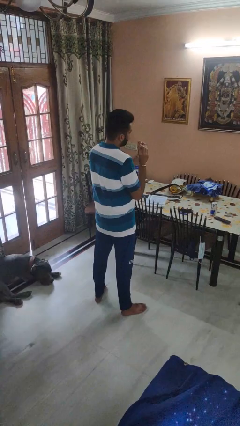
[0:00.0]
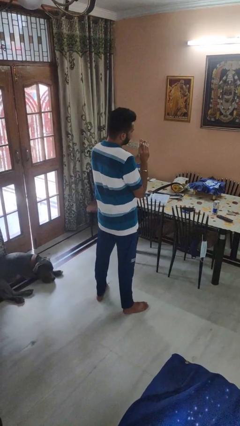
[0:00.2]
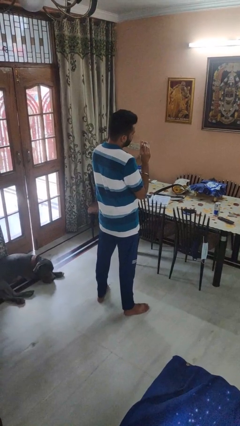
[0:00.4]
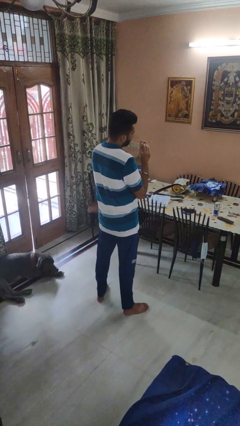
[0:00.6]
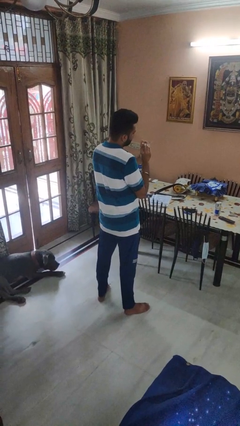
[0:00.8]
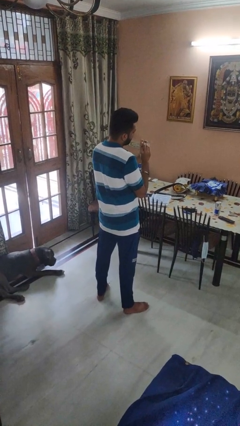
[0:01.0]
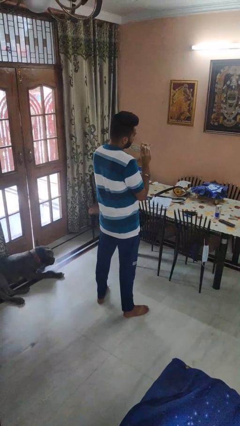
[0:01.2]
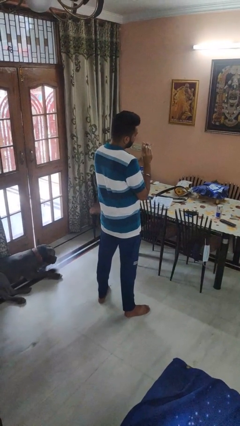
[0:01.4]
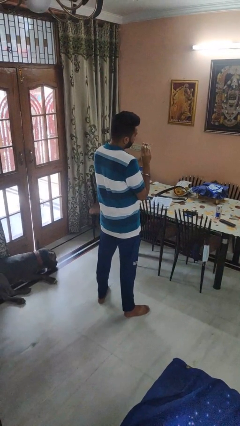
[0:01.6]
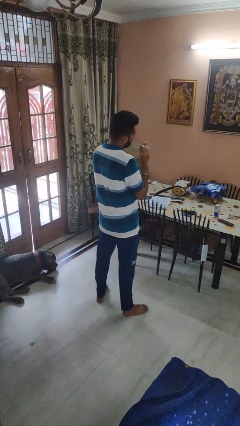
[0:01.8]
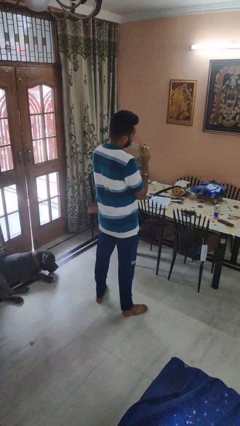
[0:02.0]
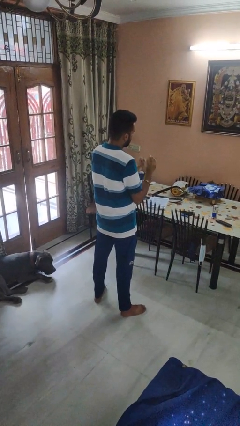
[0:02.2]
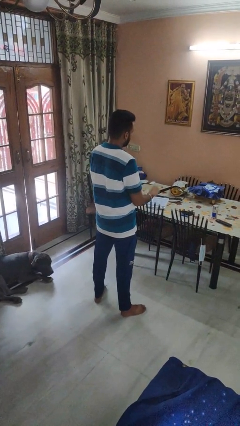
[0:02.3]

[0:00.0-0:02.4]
person files fingernails

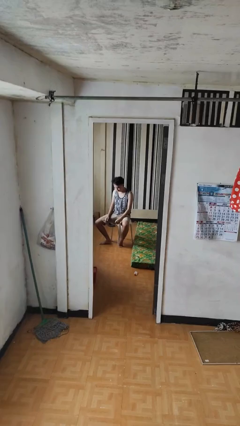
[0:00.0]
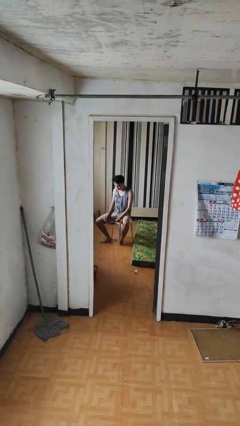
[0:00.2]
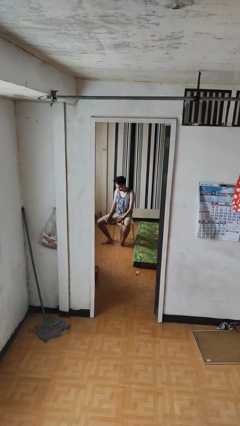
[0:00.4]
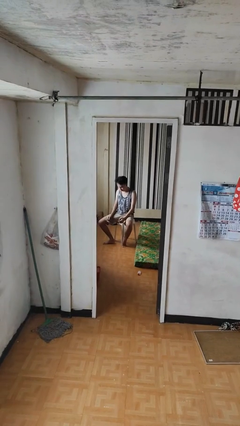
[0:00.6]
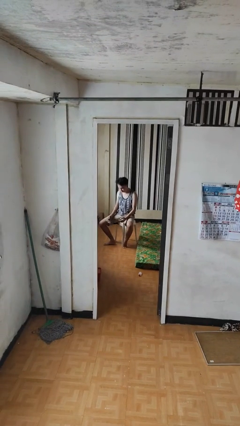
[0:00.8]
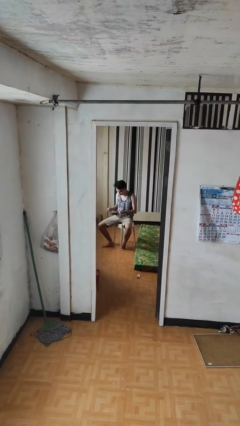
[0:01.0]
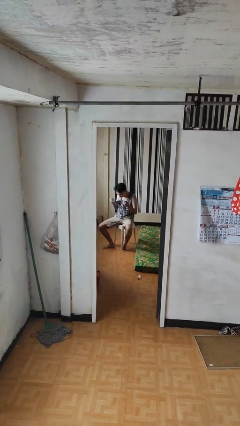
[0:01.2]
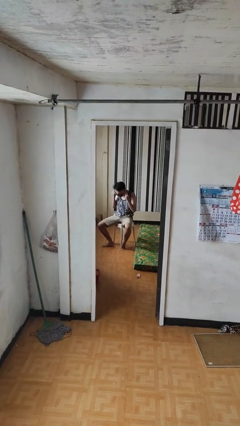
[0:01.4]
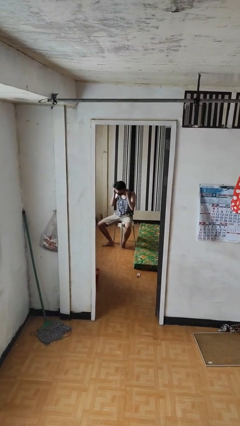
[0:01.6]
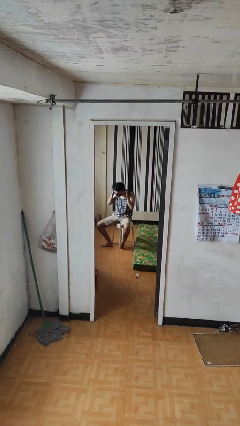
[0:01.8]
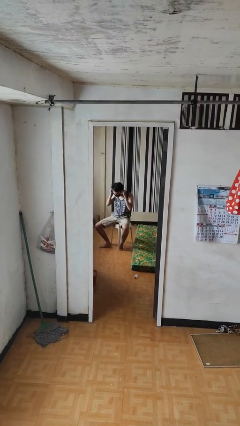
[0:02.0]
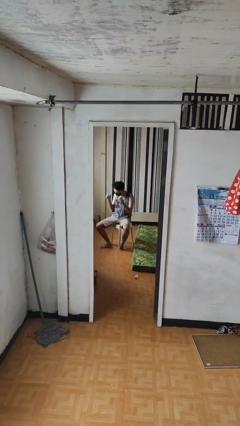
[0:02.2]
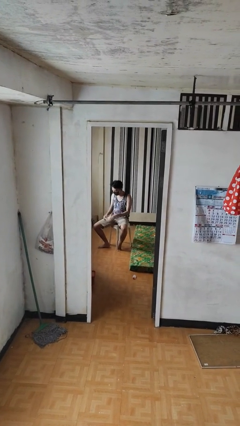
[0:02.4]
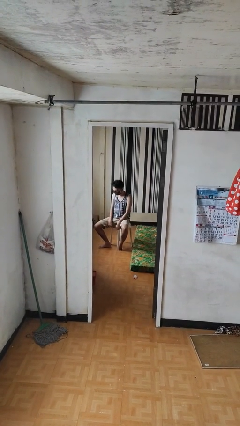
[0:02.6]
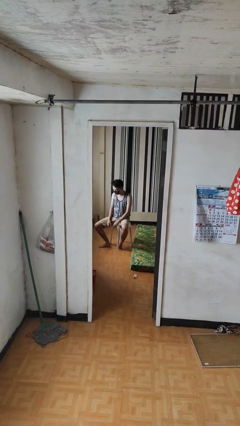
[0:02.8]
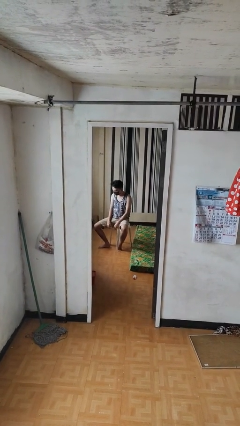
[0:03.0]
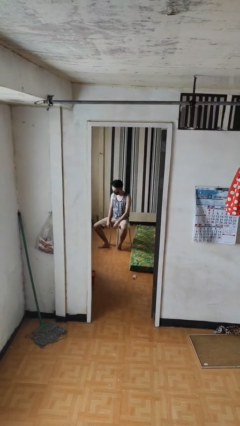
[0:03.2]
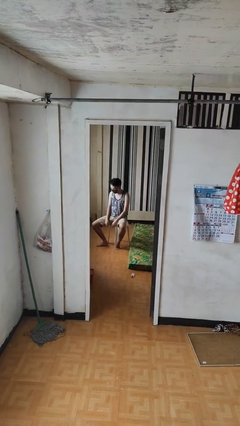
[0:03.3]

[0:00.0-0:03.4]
person puts on facemask

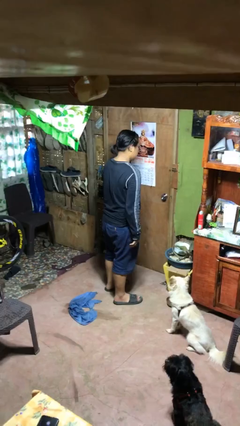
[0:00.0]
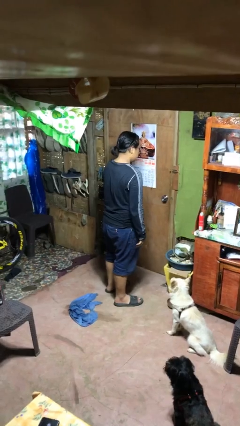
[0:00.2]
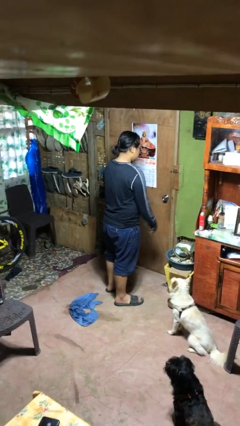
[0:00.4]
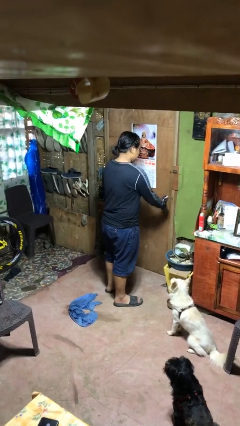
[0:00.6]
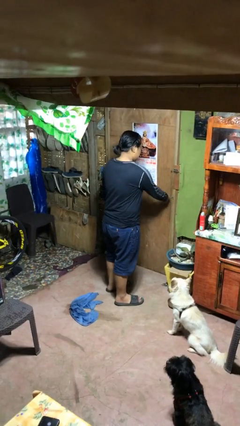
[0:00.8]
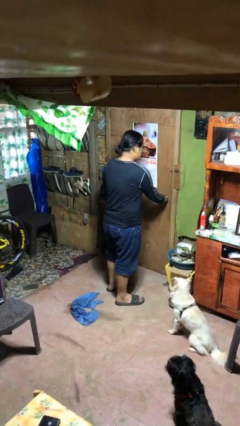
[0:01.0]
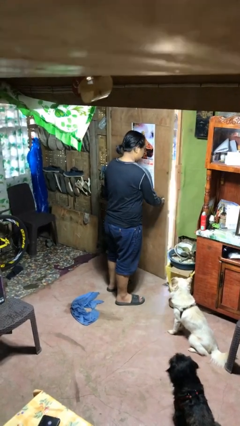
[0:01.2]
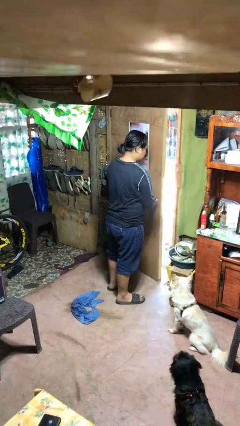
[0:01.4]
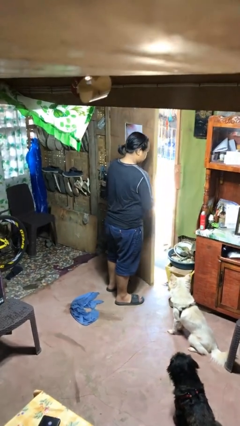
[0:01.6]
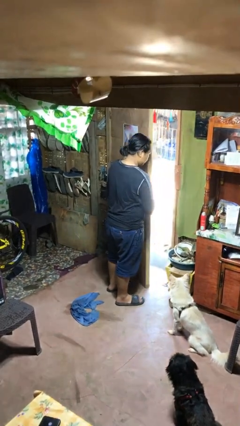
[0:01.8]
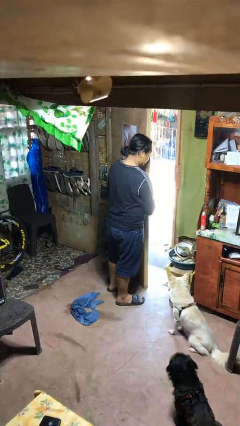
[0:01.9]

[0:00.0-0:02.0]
person opens facility door

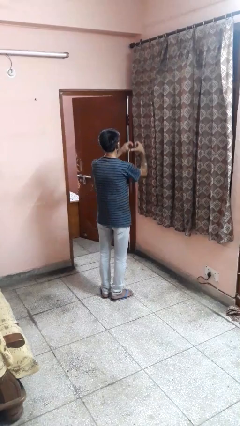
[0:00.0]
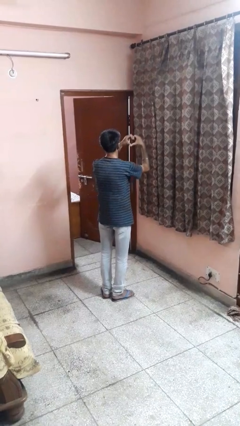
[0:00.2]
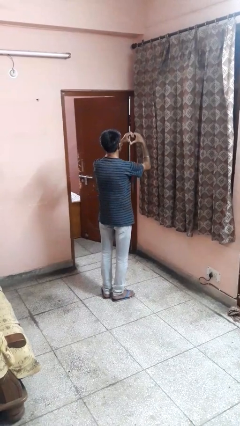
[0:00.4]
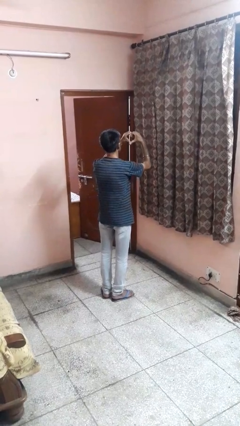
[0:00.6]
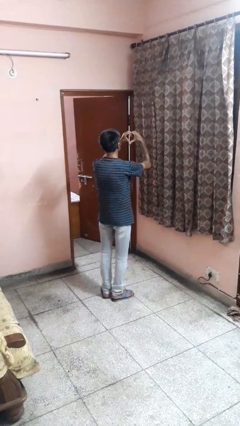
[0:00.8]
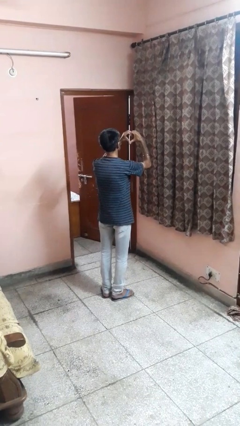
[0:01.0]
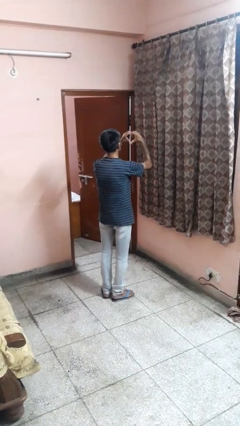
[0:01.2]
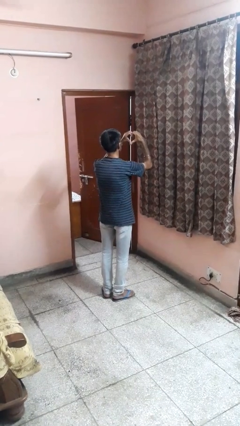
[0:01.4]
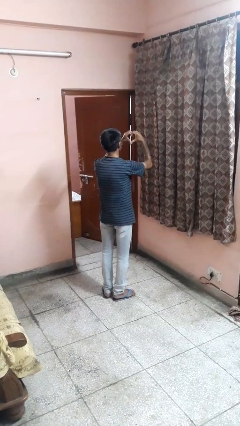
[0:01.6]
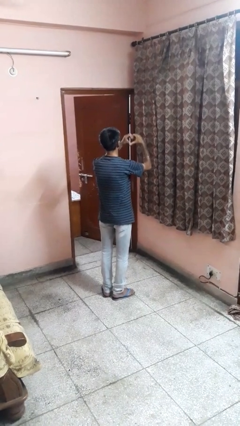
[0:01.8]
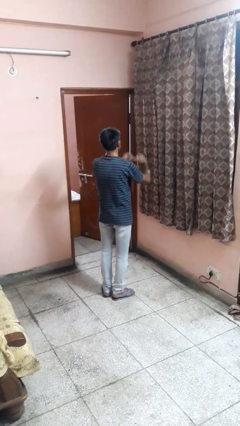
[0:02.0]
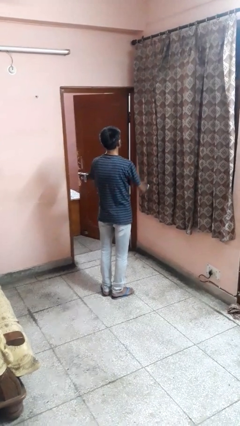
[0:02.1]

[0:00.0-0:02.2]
person gestures heart

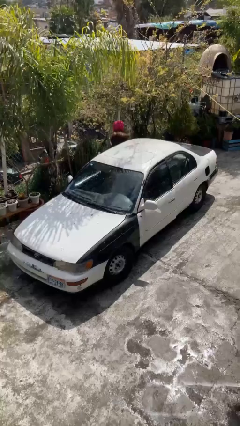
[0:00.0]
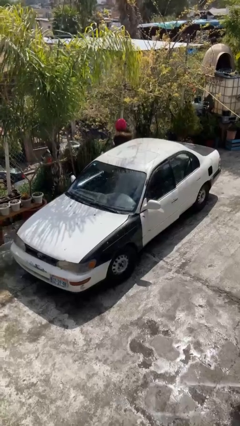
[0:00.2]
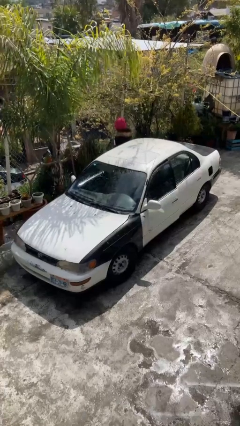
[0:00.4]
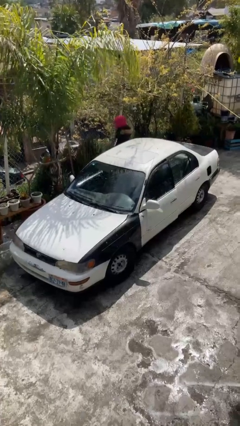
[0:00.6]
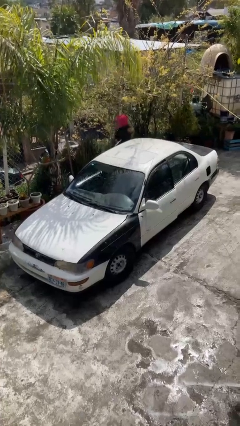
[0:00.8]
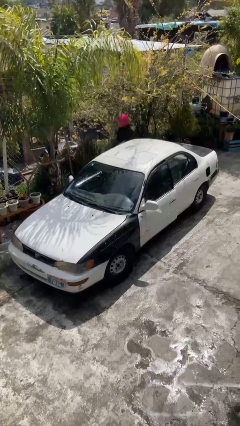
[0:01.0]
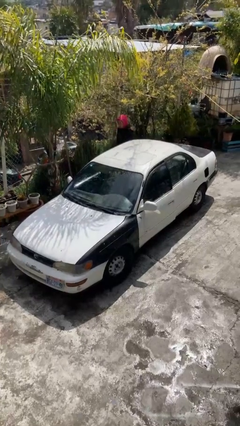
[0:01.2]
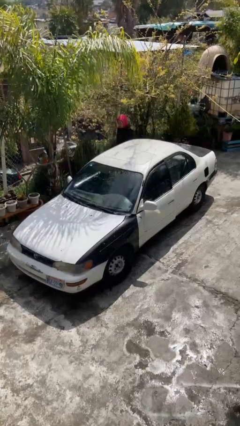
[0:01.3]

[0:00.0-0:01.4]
car drops off person

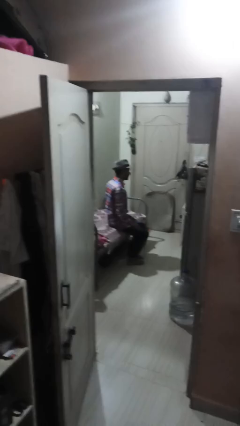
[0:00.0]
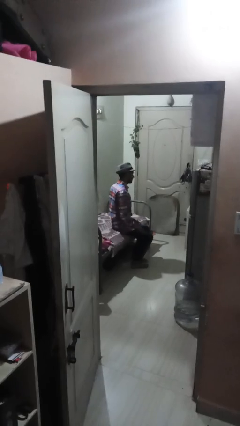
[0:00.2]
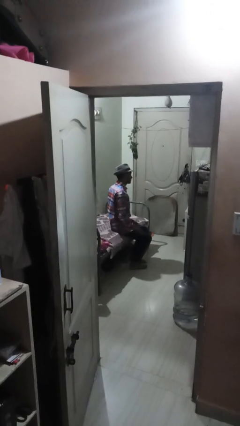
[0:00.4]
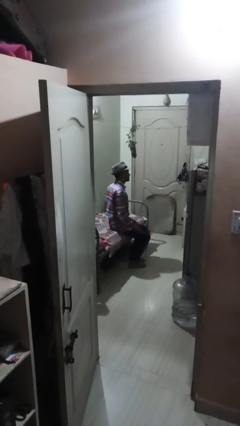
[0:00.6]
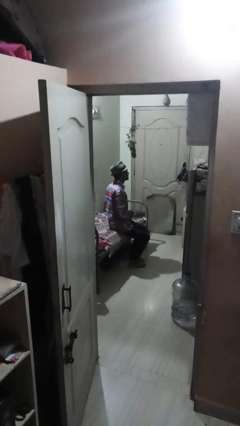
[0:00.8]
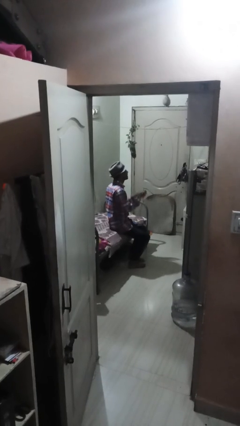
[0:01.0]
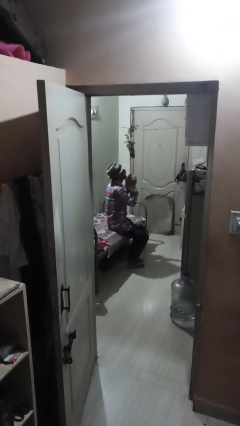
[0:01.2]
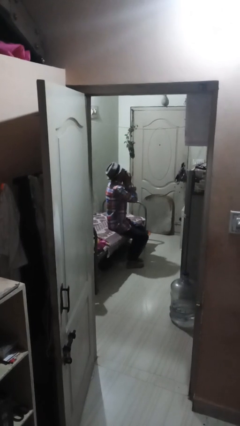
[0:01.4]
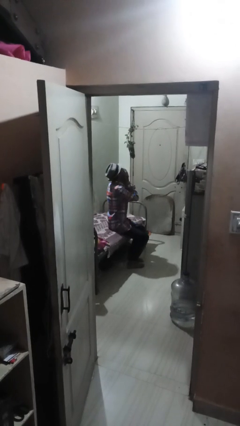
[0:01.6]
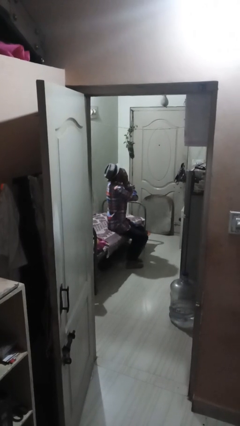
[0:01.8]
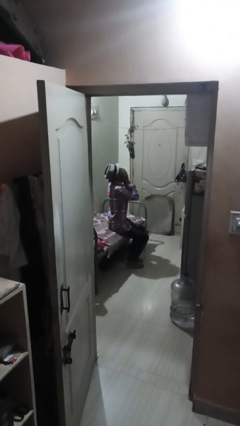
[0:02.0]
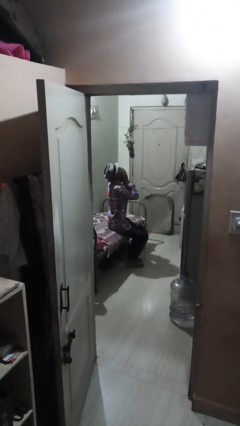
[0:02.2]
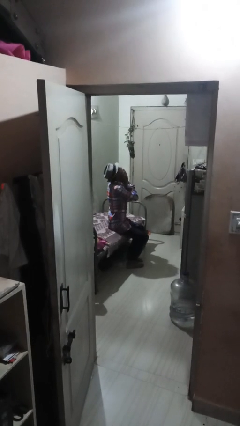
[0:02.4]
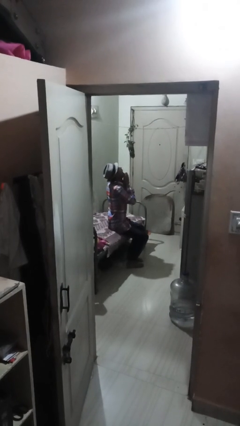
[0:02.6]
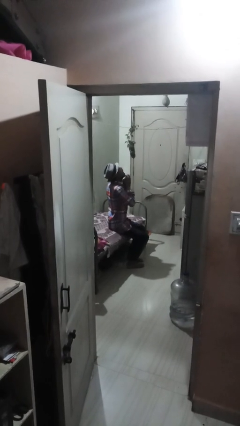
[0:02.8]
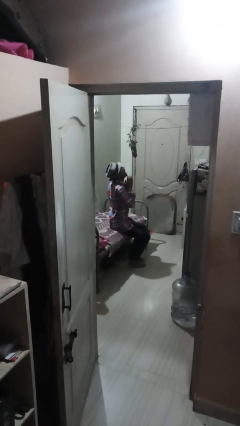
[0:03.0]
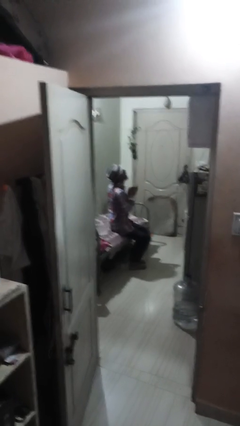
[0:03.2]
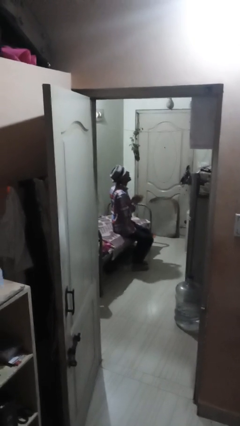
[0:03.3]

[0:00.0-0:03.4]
person yawns

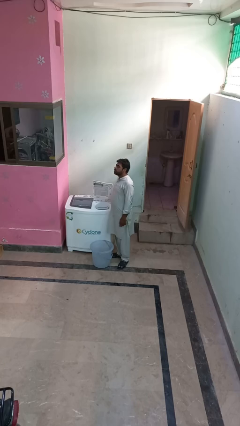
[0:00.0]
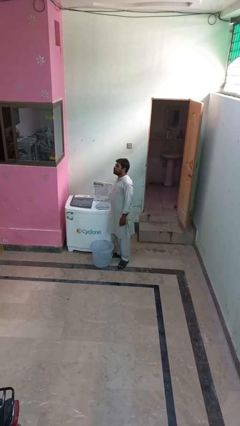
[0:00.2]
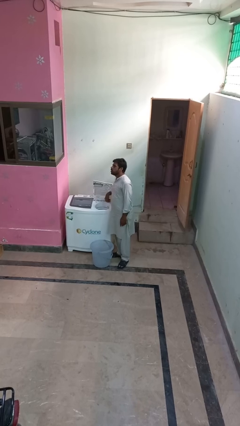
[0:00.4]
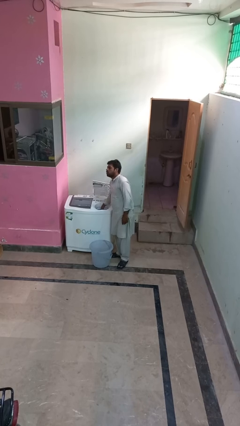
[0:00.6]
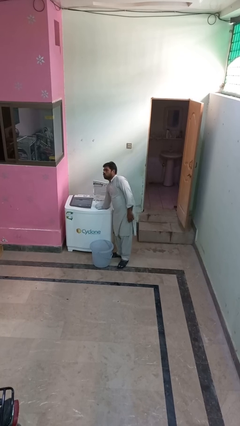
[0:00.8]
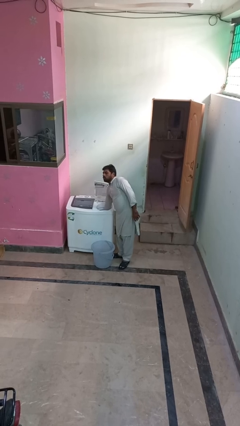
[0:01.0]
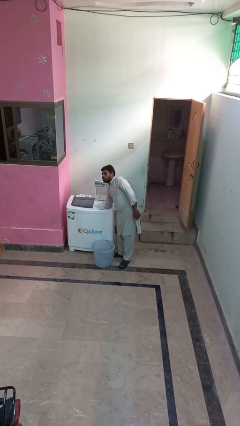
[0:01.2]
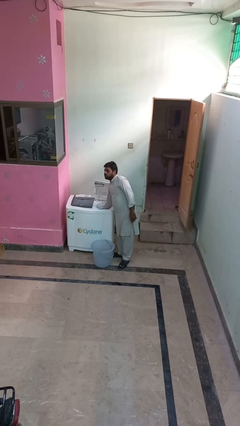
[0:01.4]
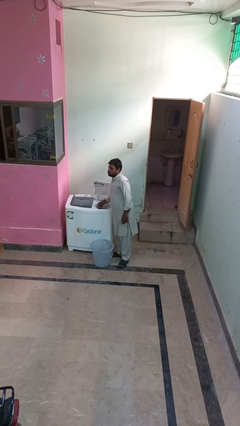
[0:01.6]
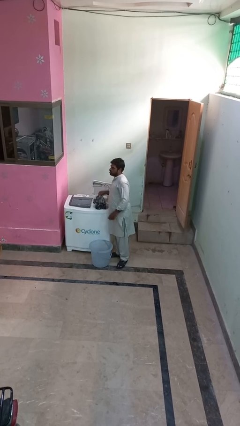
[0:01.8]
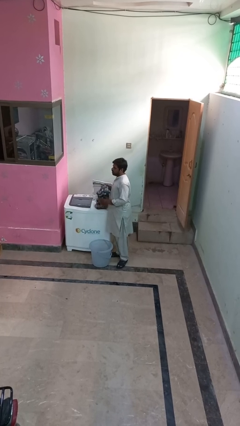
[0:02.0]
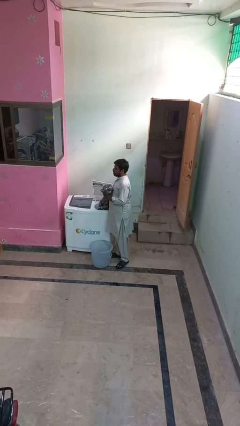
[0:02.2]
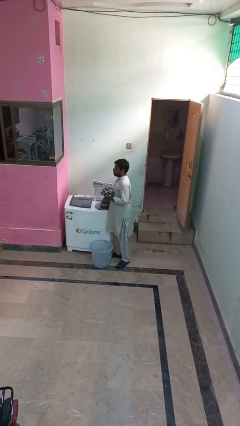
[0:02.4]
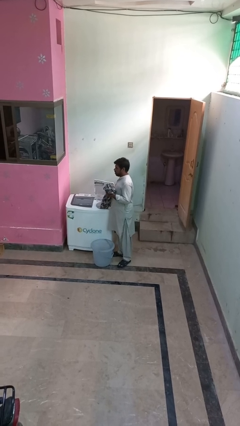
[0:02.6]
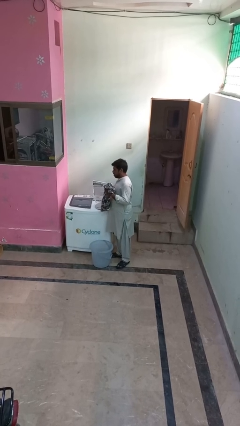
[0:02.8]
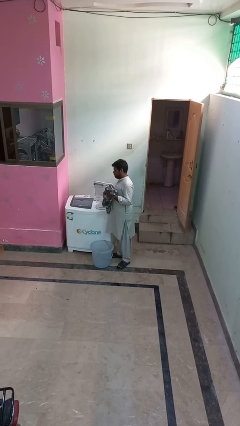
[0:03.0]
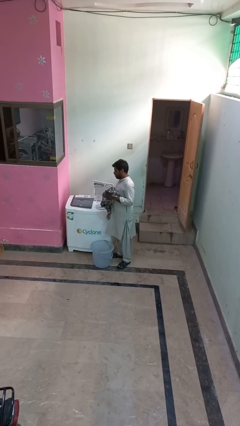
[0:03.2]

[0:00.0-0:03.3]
person unloads dryer
